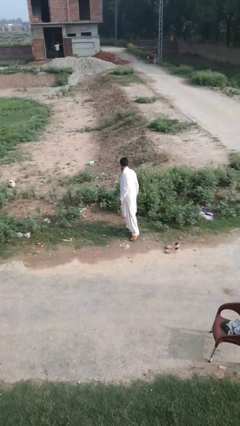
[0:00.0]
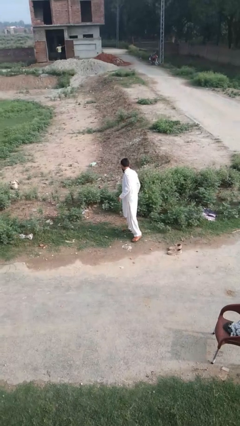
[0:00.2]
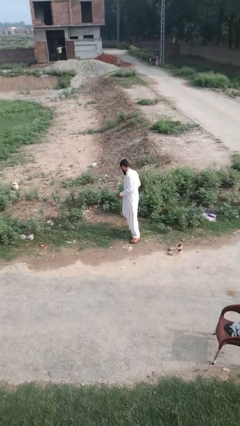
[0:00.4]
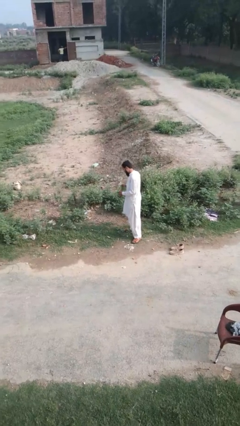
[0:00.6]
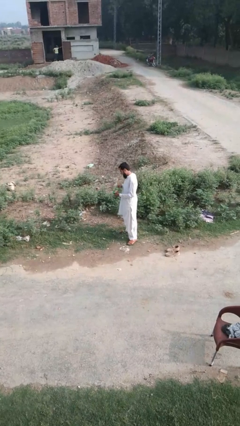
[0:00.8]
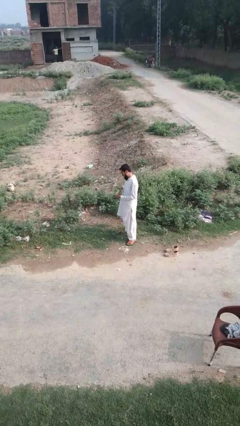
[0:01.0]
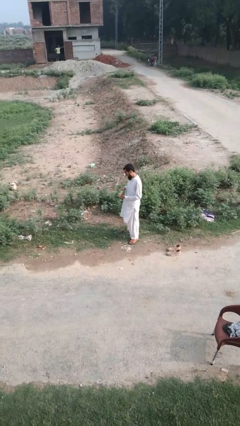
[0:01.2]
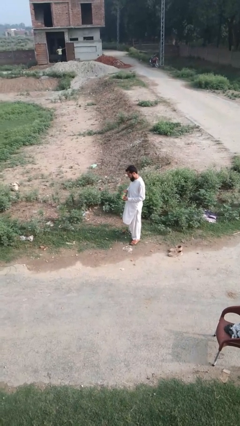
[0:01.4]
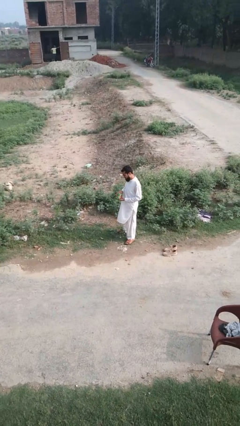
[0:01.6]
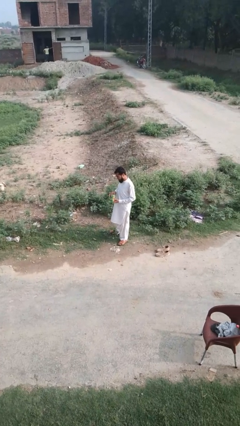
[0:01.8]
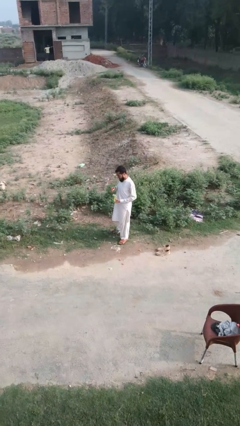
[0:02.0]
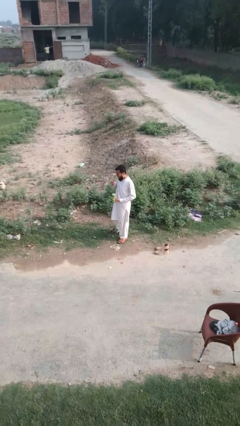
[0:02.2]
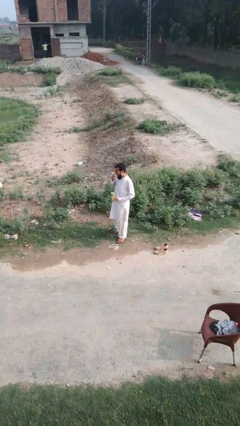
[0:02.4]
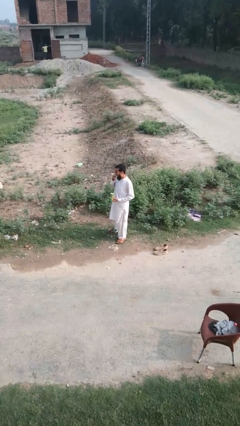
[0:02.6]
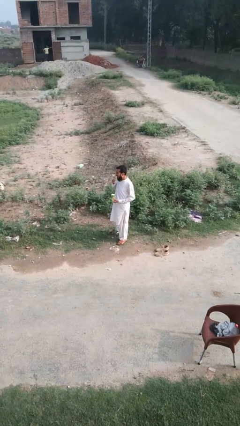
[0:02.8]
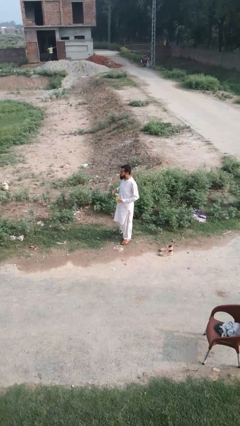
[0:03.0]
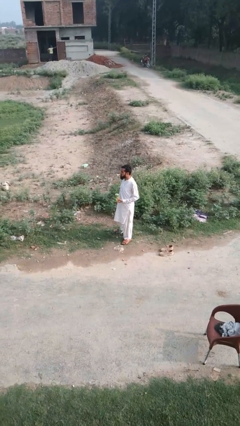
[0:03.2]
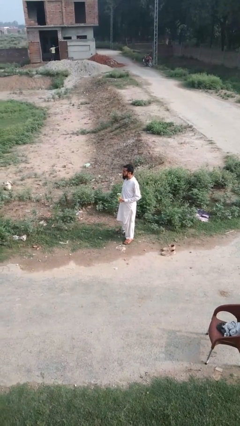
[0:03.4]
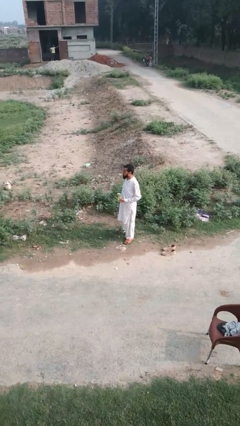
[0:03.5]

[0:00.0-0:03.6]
person eats snack from bag

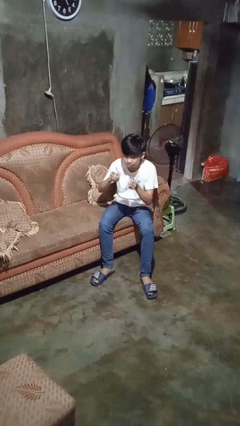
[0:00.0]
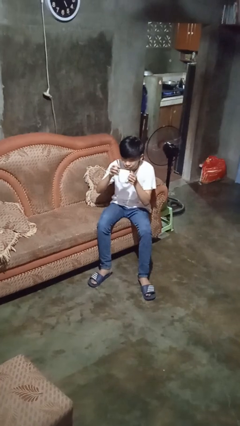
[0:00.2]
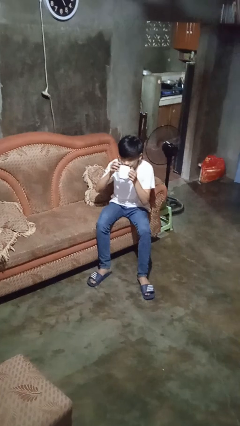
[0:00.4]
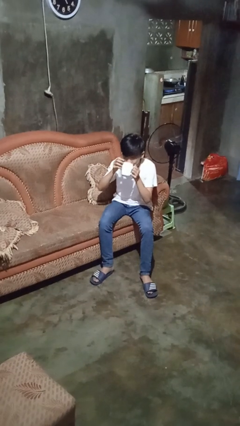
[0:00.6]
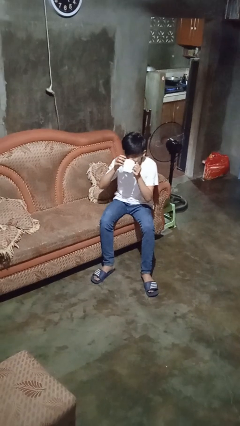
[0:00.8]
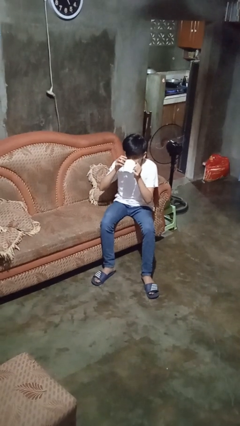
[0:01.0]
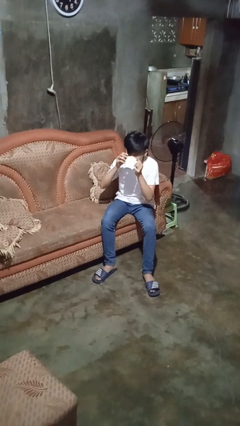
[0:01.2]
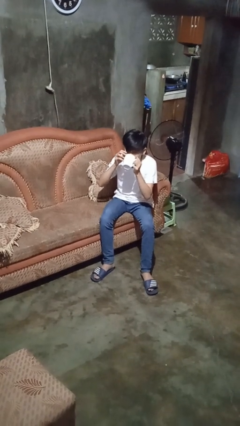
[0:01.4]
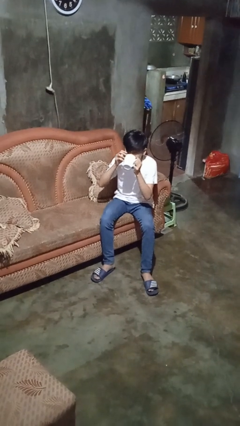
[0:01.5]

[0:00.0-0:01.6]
person drinks from mug

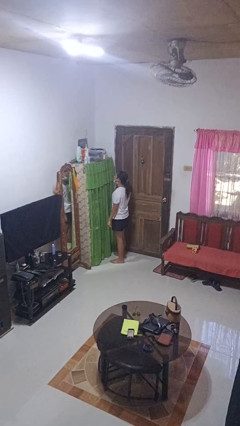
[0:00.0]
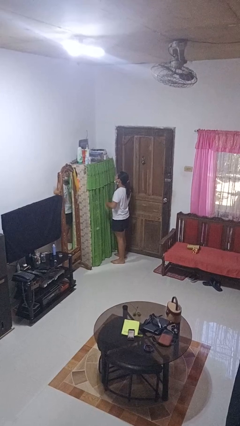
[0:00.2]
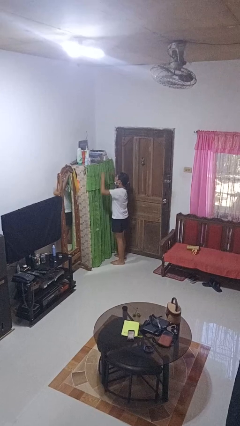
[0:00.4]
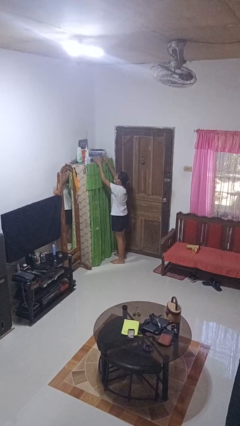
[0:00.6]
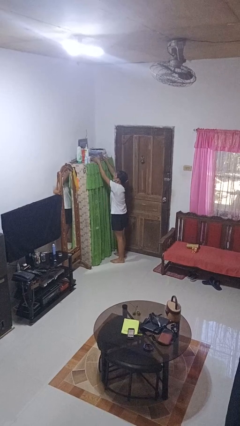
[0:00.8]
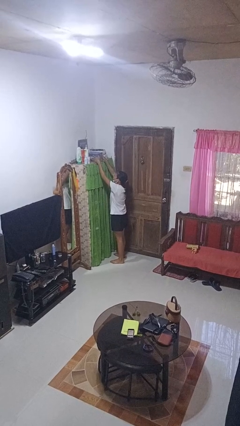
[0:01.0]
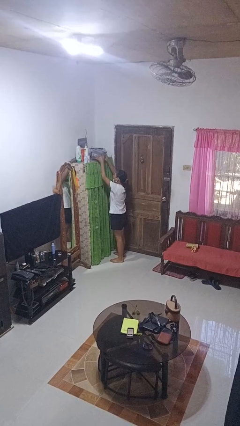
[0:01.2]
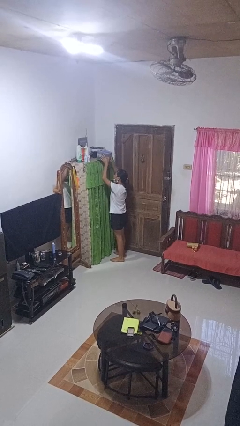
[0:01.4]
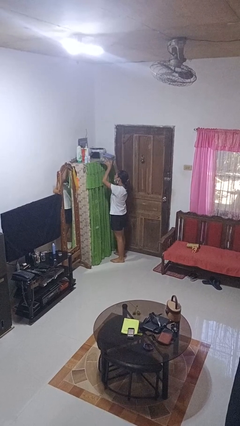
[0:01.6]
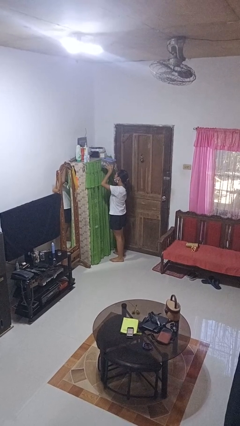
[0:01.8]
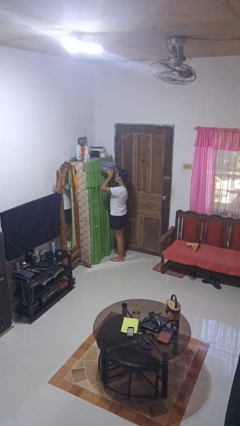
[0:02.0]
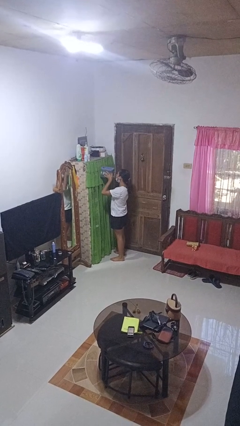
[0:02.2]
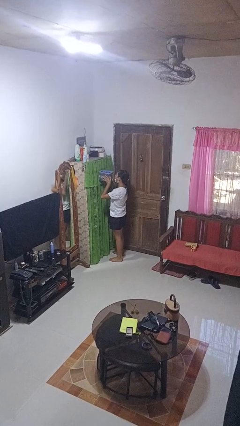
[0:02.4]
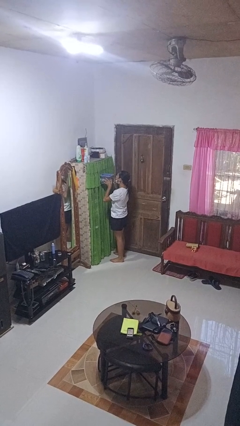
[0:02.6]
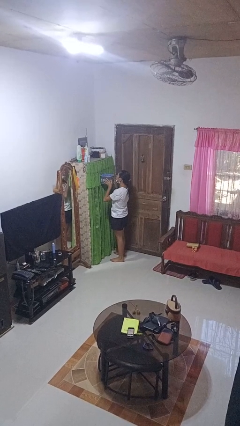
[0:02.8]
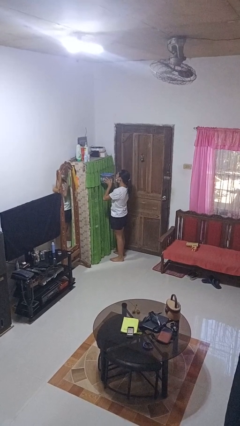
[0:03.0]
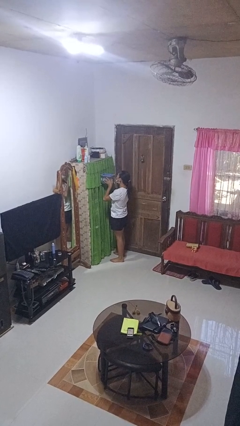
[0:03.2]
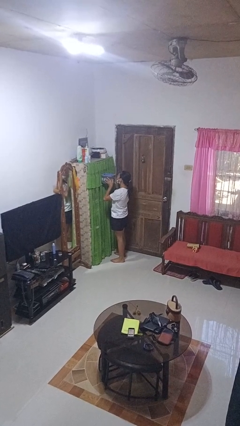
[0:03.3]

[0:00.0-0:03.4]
person picks up object from shelf

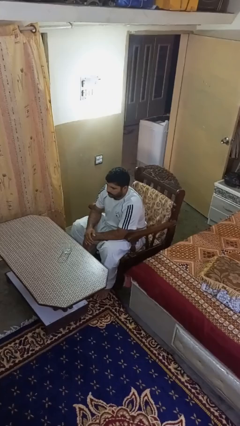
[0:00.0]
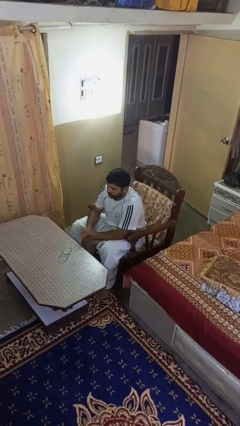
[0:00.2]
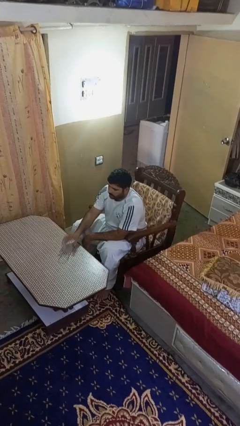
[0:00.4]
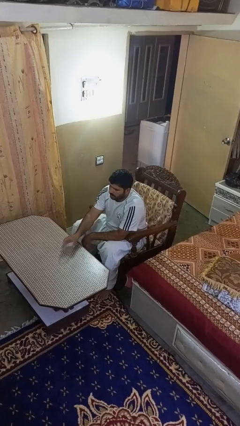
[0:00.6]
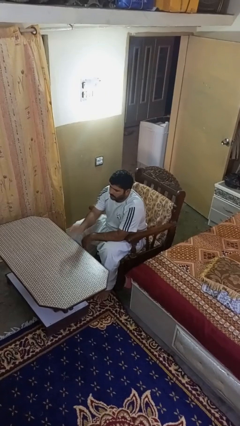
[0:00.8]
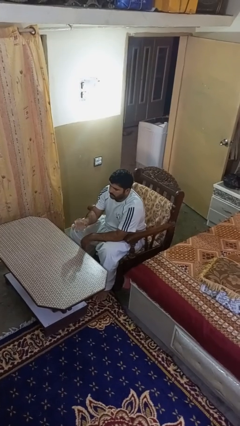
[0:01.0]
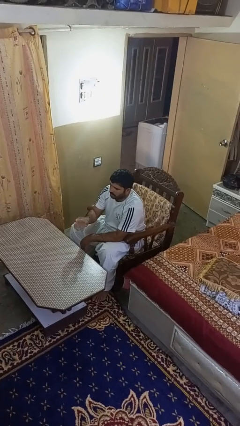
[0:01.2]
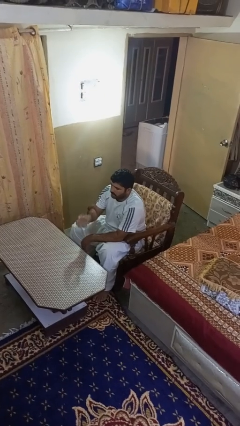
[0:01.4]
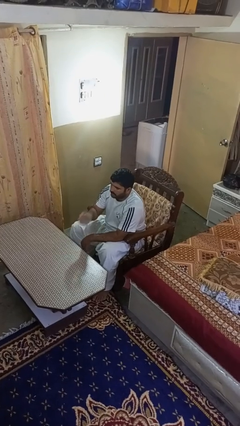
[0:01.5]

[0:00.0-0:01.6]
person picks up object from table

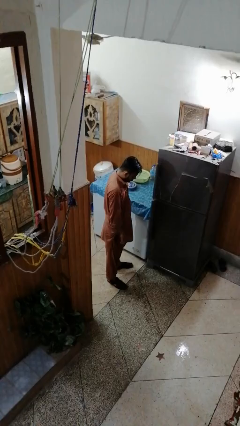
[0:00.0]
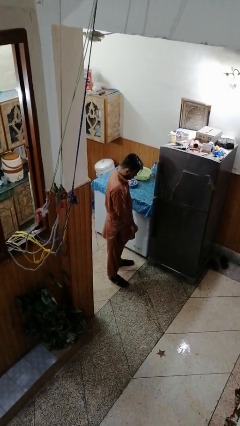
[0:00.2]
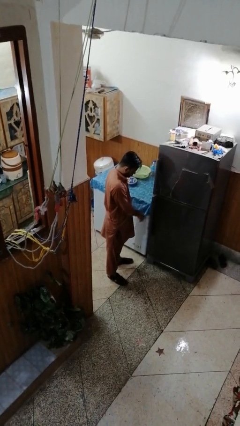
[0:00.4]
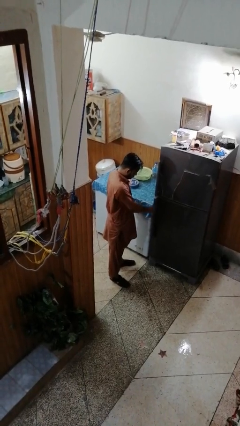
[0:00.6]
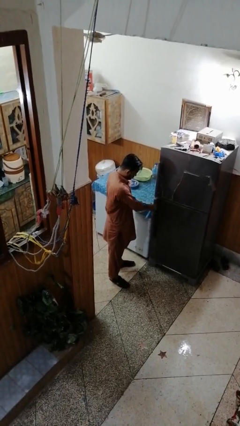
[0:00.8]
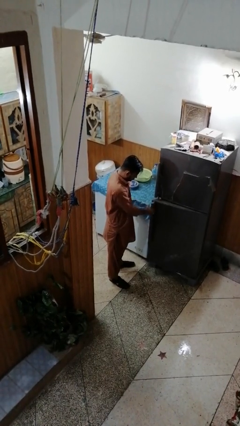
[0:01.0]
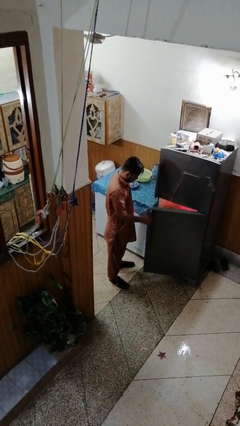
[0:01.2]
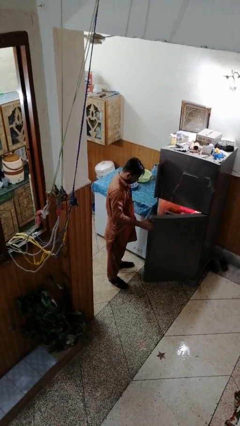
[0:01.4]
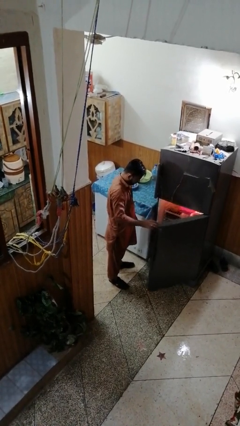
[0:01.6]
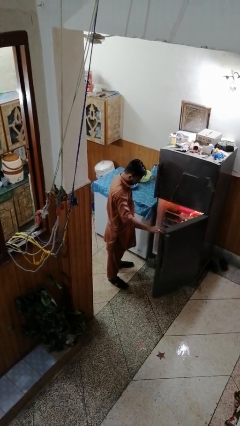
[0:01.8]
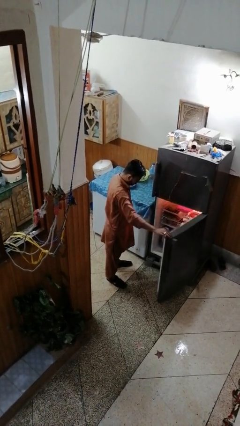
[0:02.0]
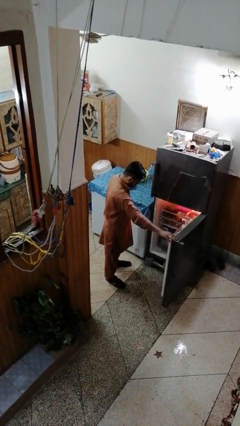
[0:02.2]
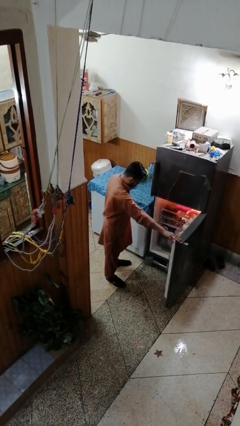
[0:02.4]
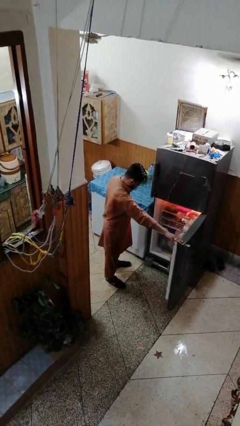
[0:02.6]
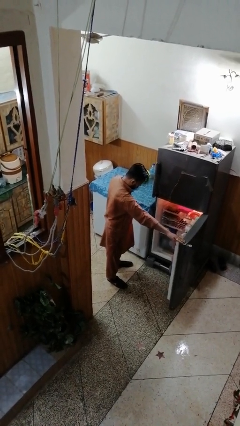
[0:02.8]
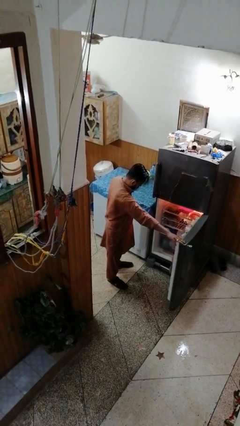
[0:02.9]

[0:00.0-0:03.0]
person opens refrigerator

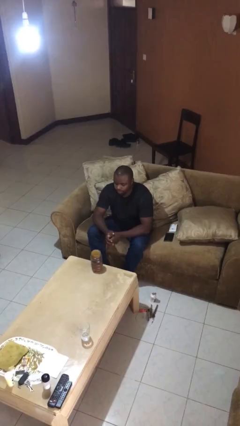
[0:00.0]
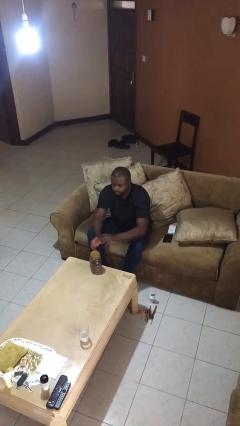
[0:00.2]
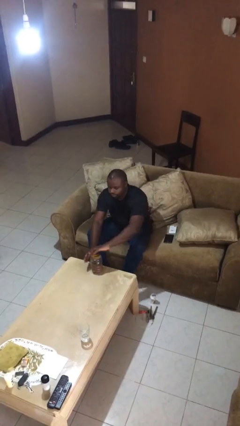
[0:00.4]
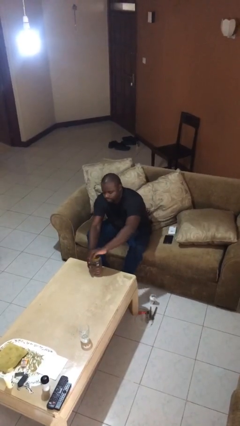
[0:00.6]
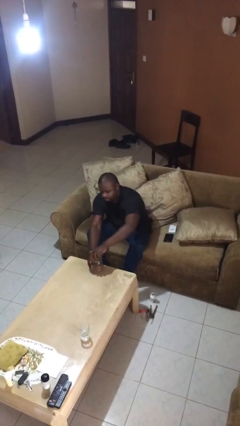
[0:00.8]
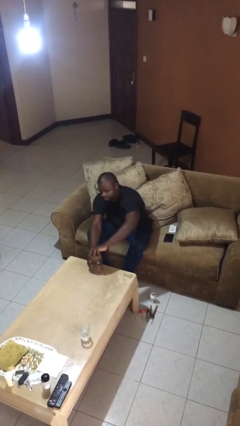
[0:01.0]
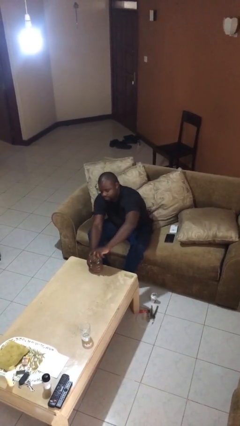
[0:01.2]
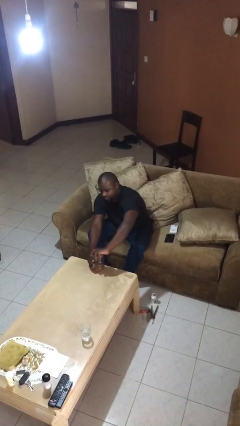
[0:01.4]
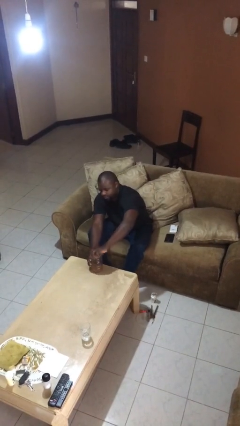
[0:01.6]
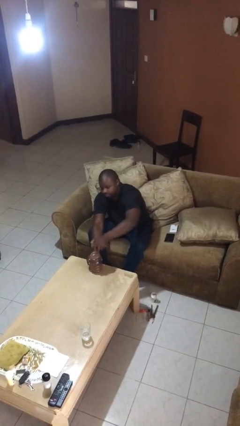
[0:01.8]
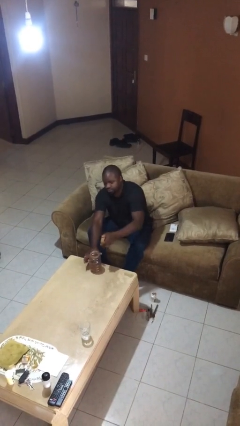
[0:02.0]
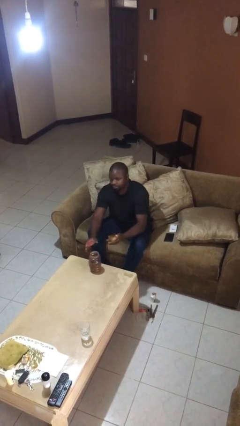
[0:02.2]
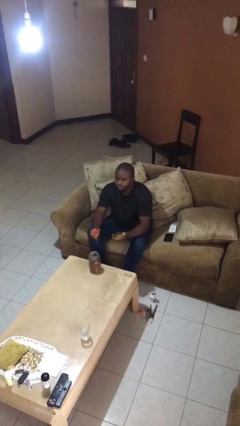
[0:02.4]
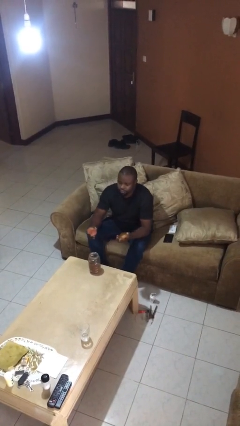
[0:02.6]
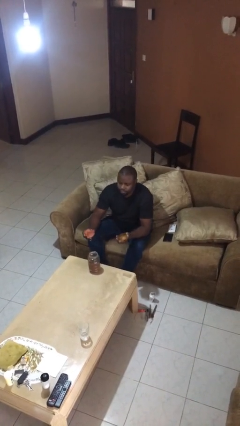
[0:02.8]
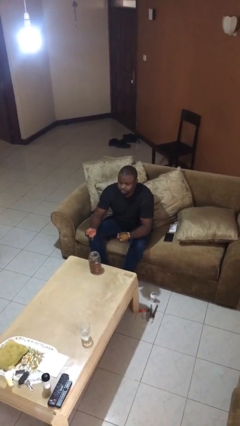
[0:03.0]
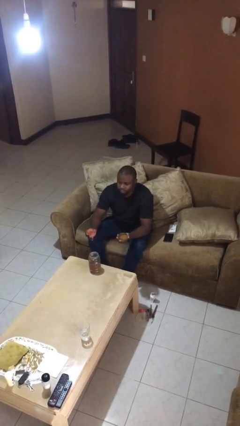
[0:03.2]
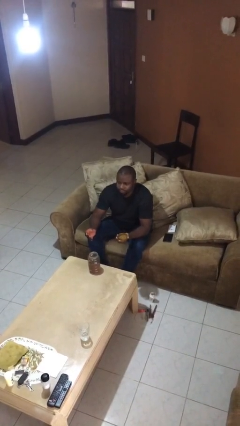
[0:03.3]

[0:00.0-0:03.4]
person opens jar

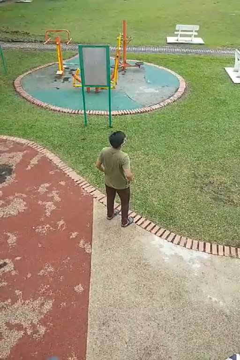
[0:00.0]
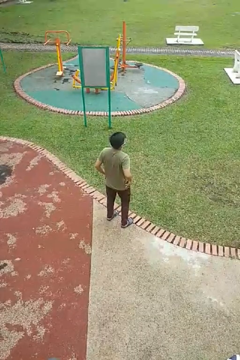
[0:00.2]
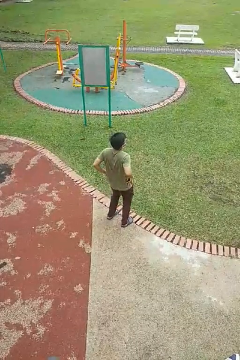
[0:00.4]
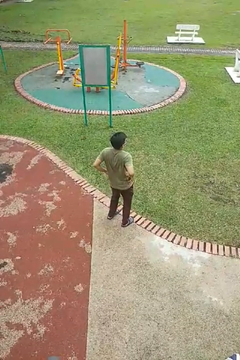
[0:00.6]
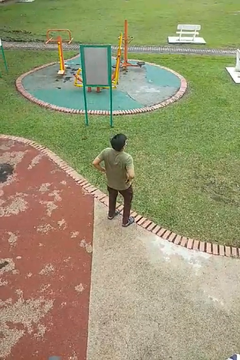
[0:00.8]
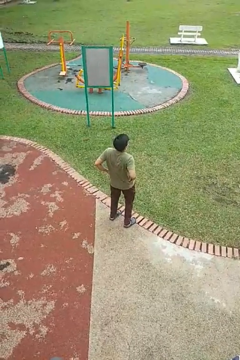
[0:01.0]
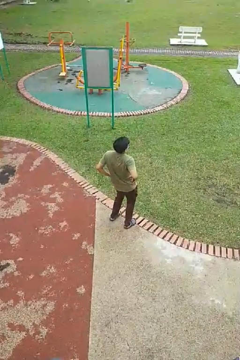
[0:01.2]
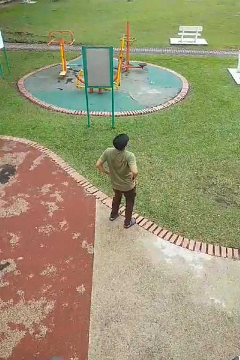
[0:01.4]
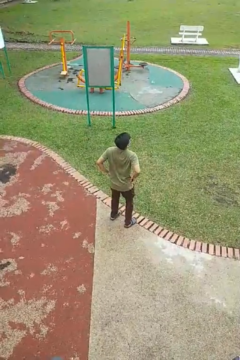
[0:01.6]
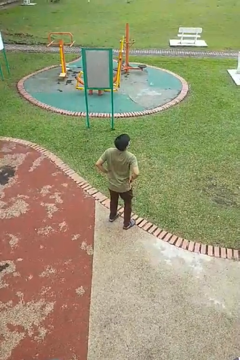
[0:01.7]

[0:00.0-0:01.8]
person wiggles hips
